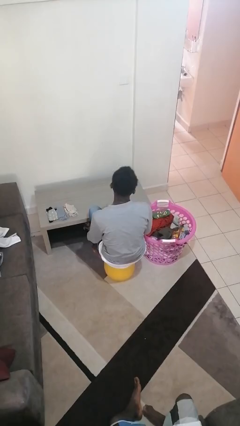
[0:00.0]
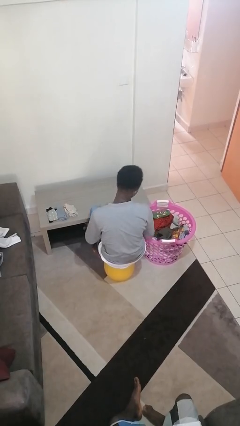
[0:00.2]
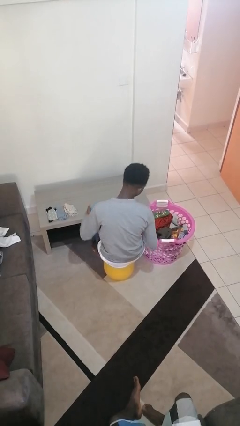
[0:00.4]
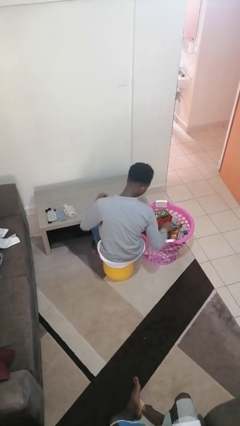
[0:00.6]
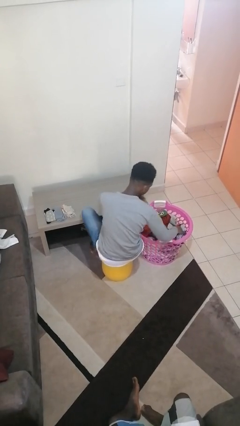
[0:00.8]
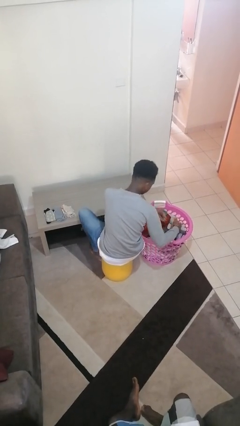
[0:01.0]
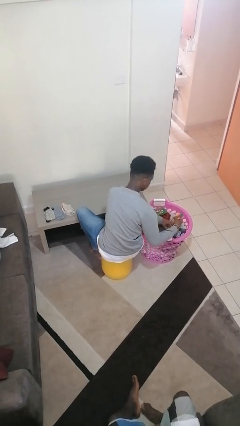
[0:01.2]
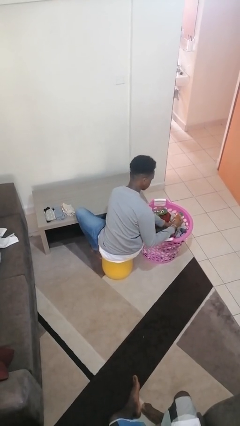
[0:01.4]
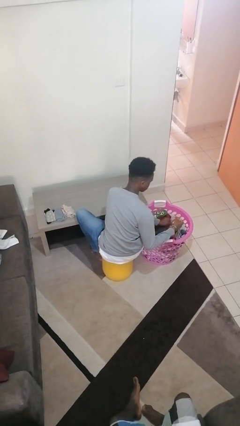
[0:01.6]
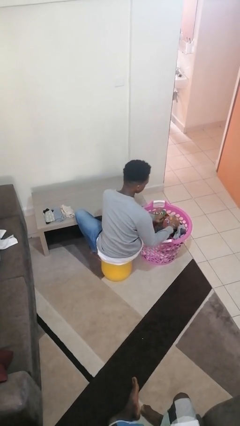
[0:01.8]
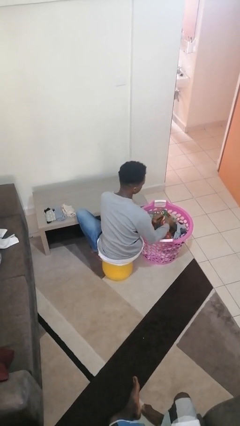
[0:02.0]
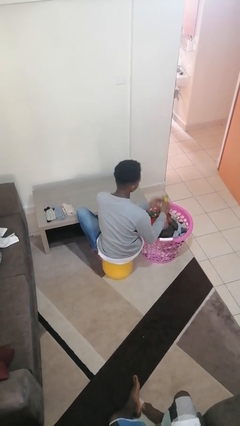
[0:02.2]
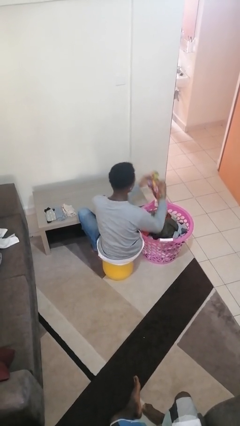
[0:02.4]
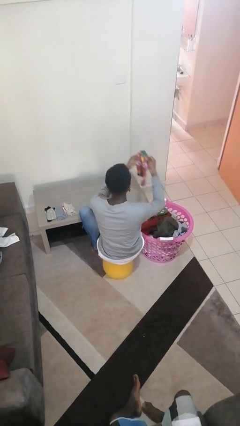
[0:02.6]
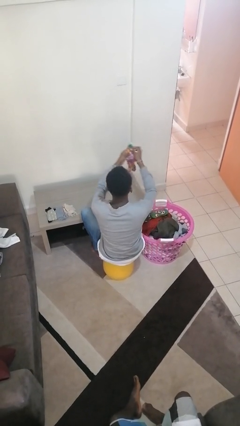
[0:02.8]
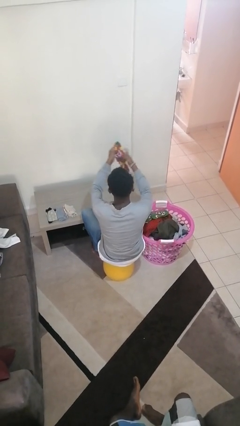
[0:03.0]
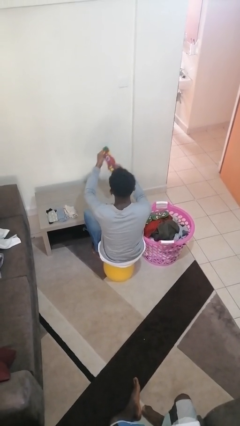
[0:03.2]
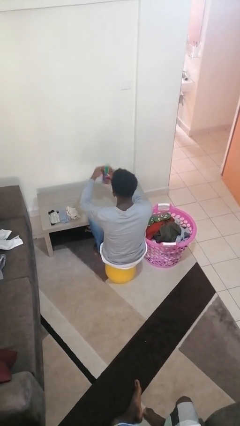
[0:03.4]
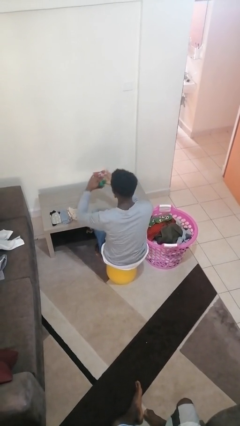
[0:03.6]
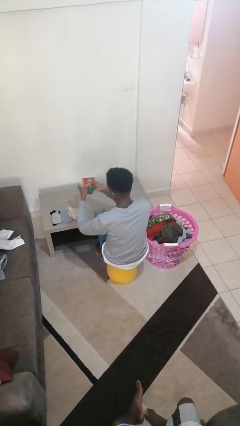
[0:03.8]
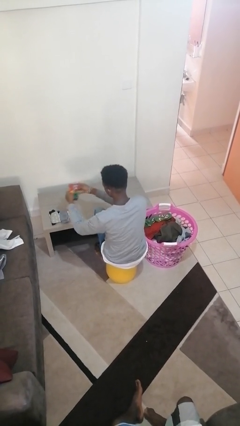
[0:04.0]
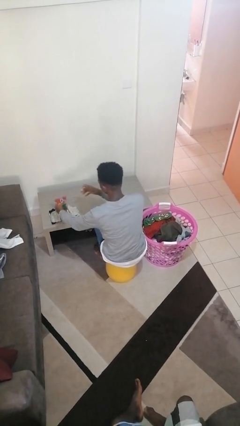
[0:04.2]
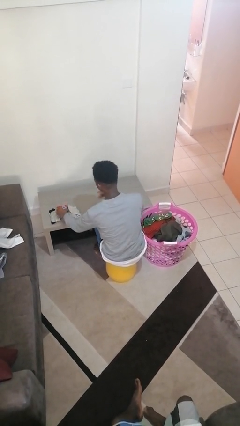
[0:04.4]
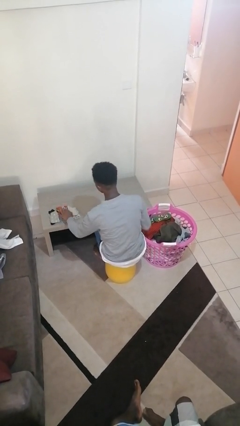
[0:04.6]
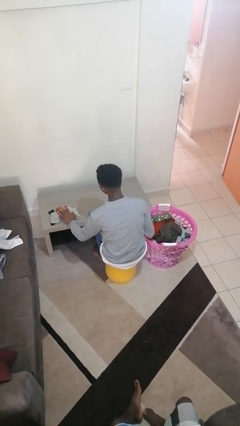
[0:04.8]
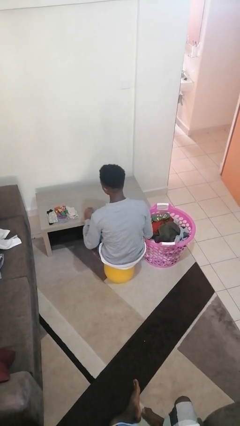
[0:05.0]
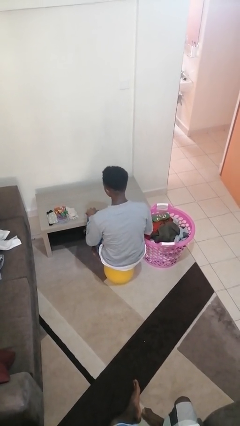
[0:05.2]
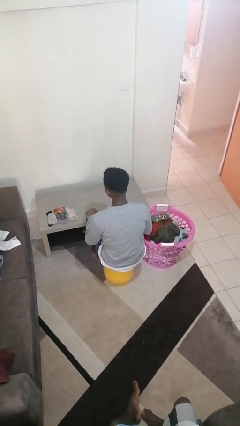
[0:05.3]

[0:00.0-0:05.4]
person folds socks

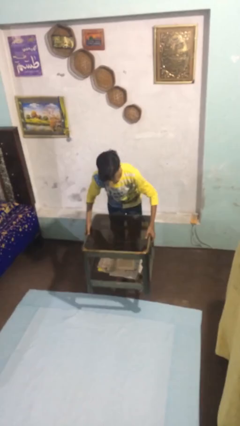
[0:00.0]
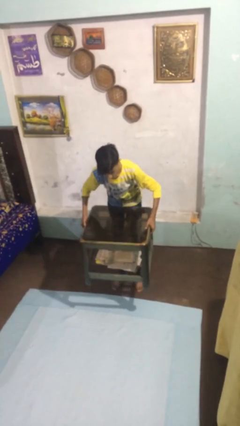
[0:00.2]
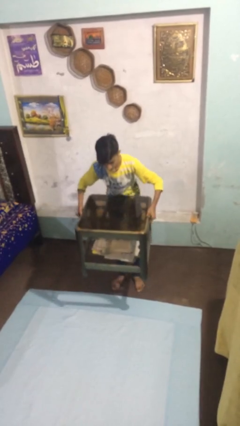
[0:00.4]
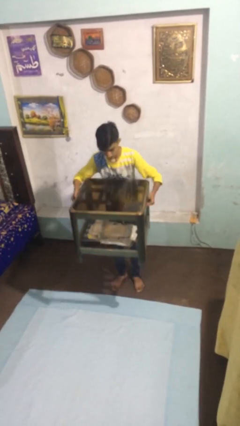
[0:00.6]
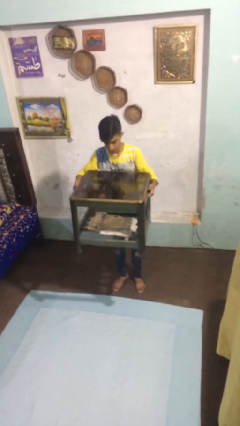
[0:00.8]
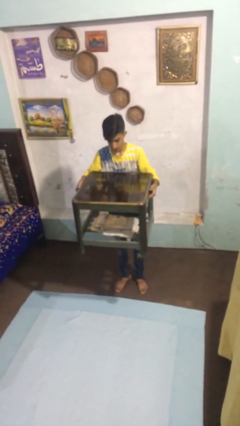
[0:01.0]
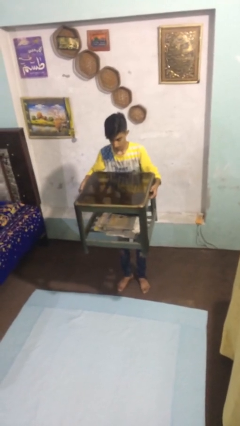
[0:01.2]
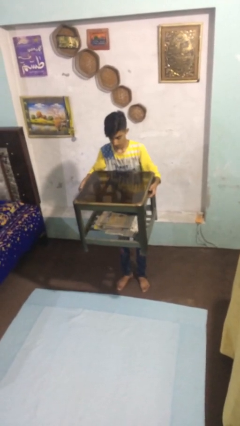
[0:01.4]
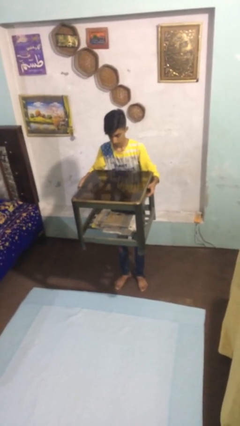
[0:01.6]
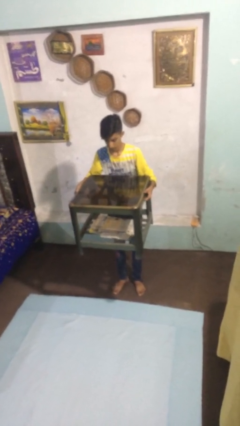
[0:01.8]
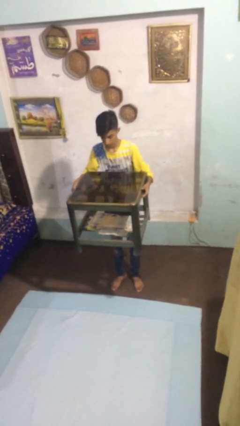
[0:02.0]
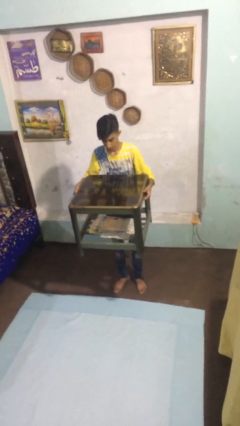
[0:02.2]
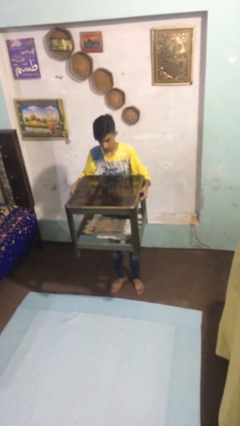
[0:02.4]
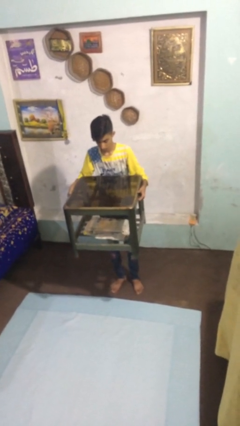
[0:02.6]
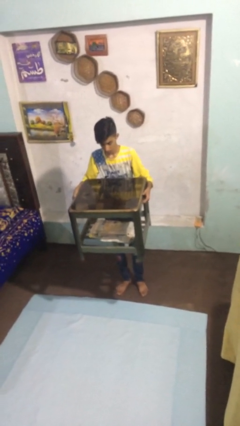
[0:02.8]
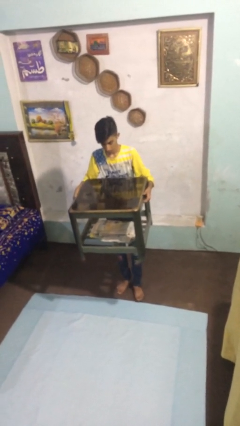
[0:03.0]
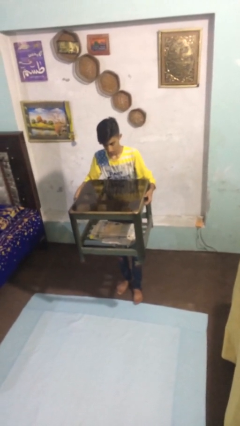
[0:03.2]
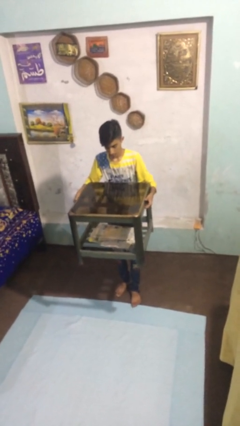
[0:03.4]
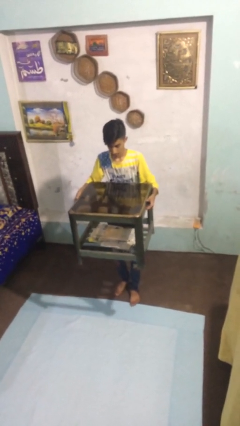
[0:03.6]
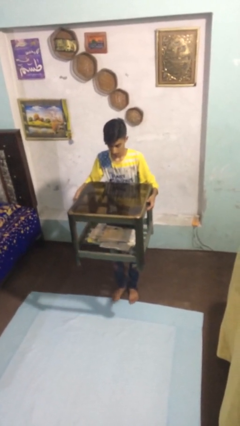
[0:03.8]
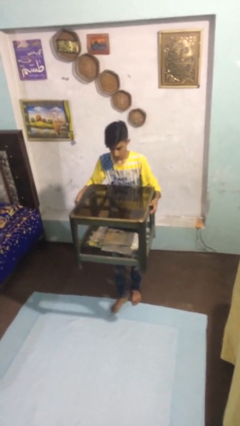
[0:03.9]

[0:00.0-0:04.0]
person carries heavy object

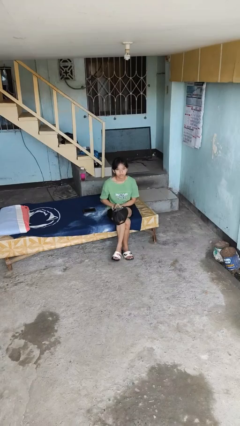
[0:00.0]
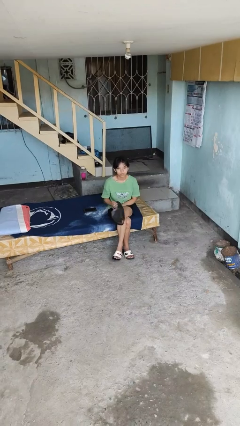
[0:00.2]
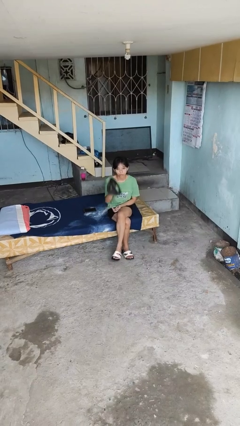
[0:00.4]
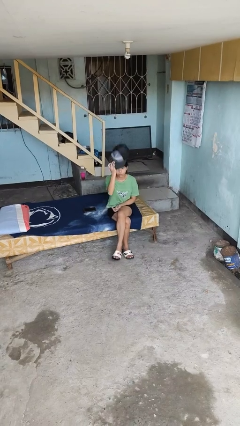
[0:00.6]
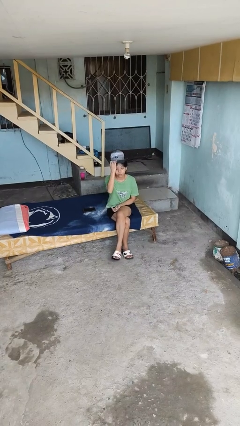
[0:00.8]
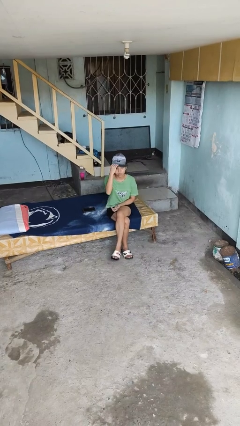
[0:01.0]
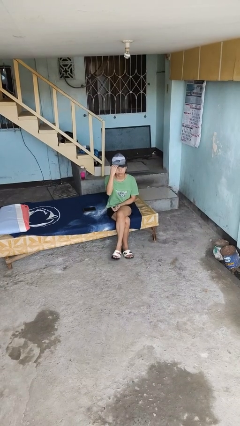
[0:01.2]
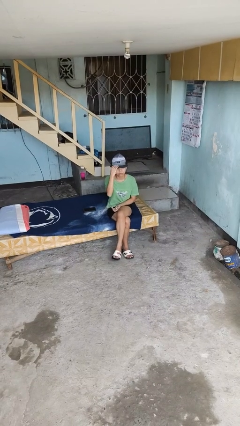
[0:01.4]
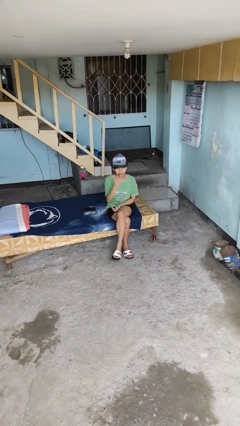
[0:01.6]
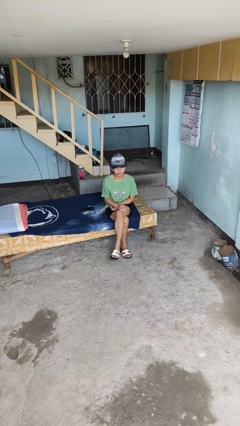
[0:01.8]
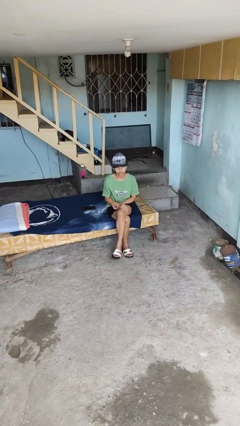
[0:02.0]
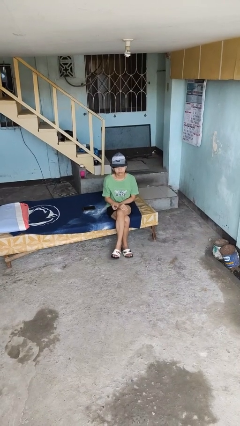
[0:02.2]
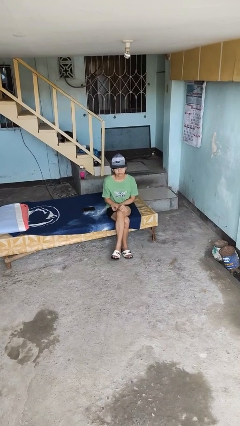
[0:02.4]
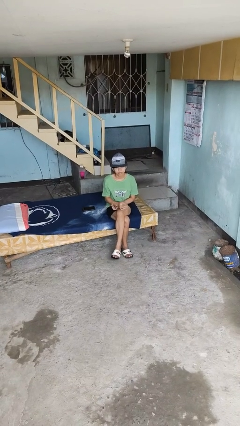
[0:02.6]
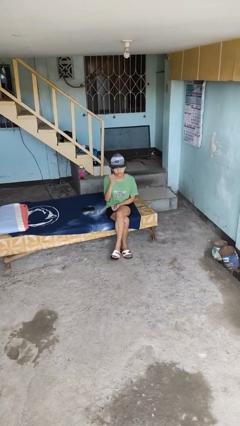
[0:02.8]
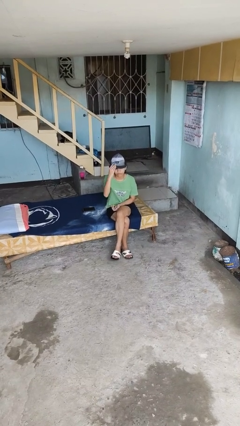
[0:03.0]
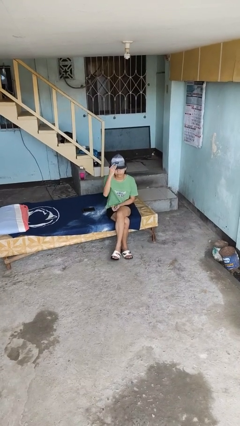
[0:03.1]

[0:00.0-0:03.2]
person puts on hat

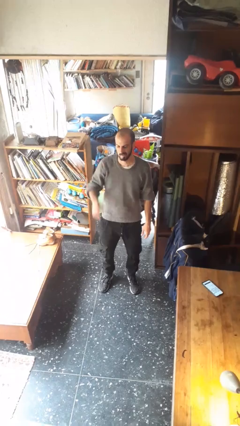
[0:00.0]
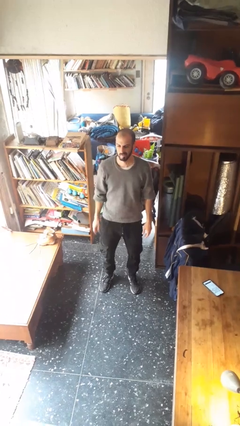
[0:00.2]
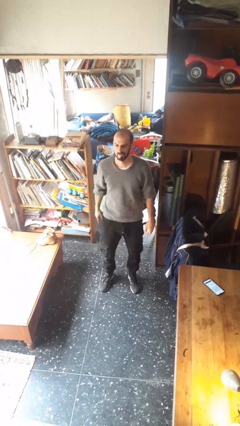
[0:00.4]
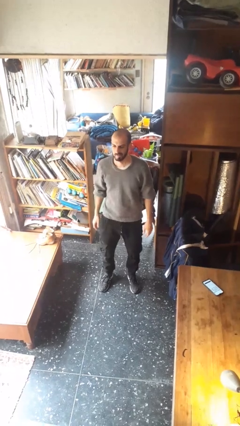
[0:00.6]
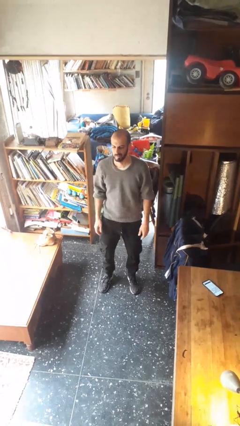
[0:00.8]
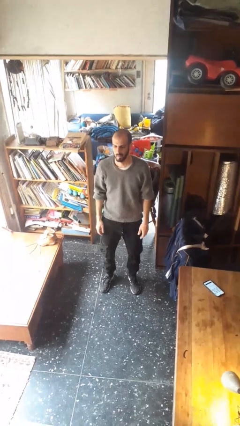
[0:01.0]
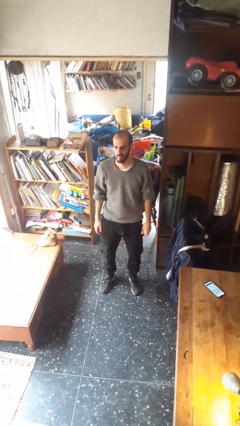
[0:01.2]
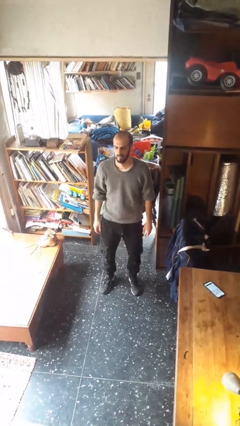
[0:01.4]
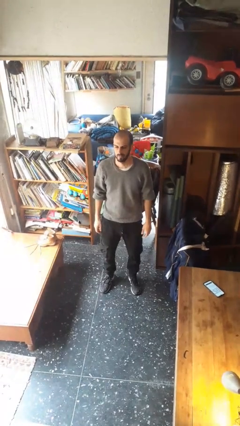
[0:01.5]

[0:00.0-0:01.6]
person gestures lower hand

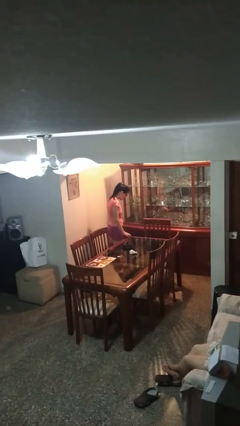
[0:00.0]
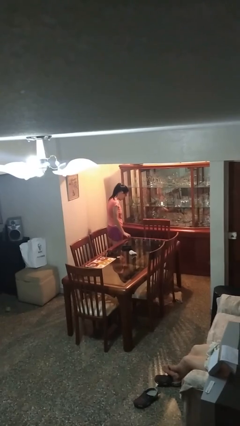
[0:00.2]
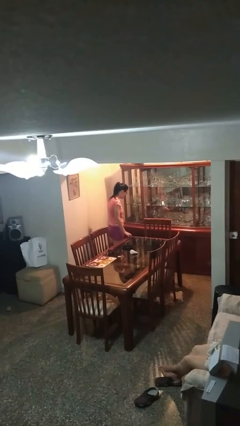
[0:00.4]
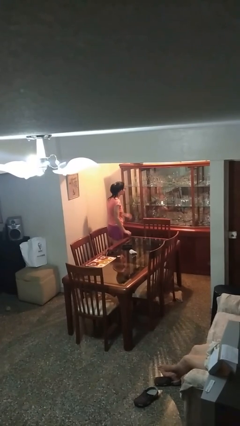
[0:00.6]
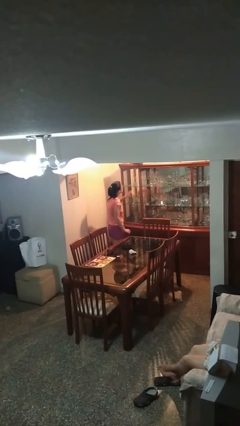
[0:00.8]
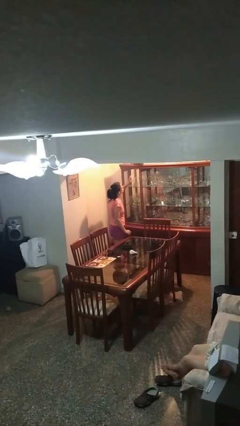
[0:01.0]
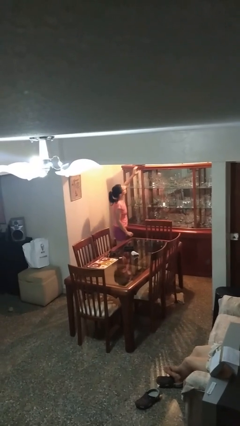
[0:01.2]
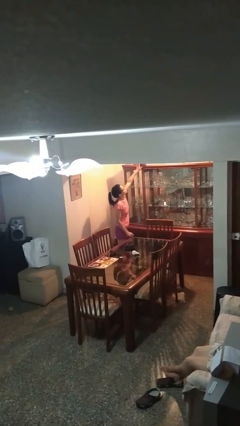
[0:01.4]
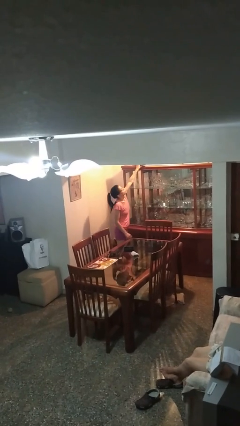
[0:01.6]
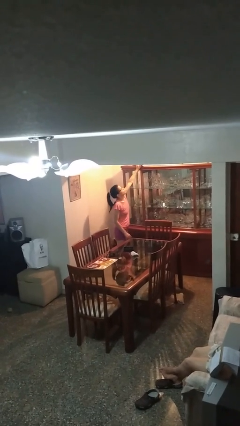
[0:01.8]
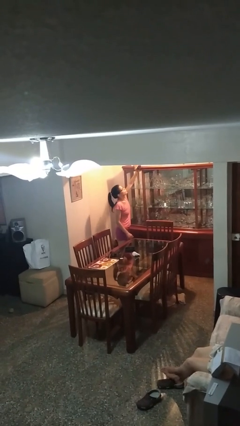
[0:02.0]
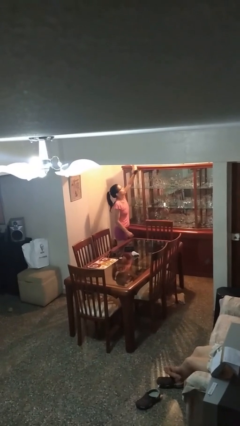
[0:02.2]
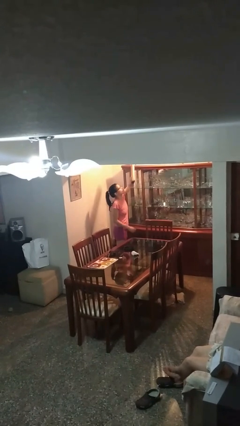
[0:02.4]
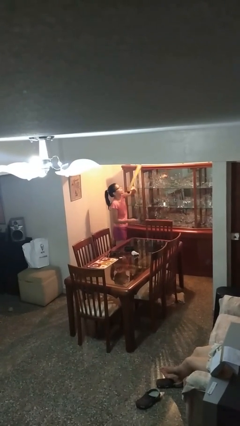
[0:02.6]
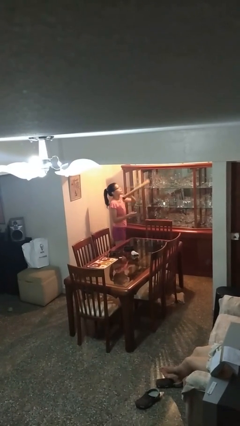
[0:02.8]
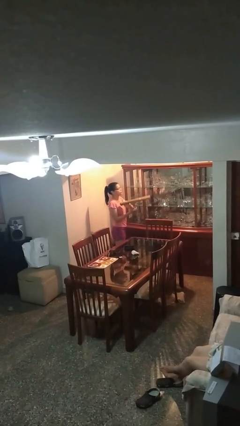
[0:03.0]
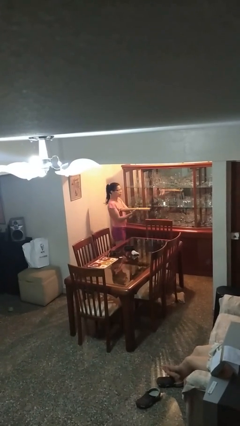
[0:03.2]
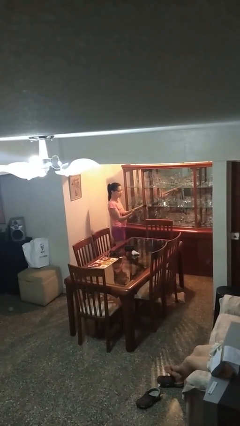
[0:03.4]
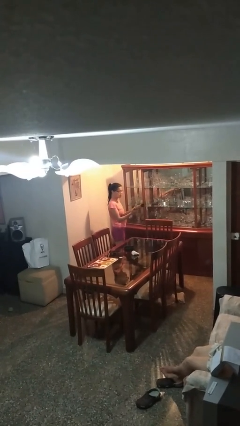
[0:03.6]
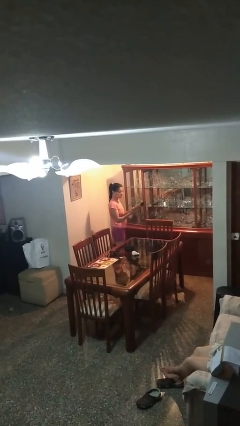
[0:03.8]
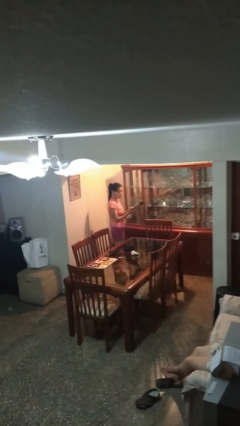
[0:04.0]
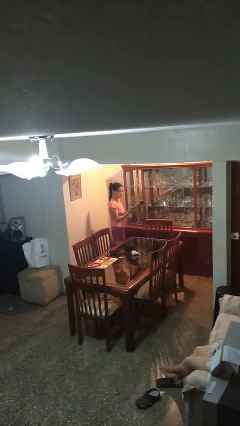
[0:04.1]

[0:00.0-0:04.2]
person picks up object from shelf
